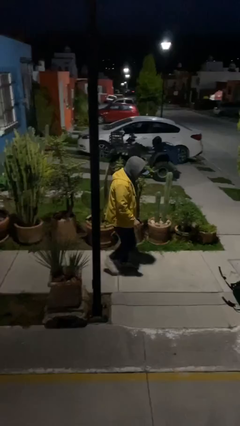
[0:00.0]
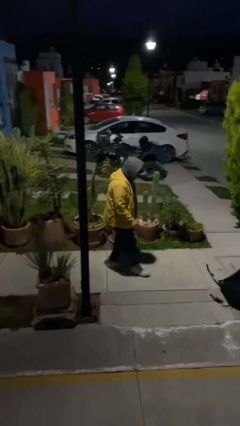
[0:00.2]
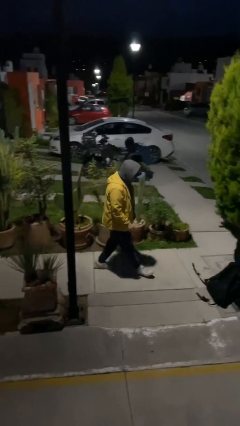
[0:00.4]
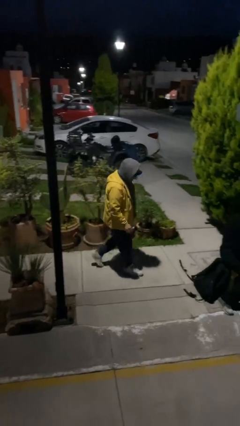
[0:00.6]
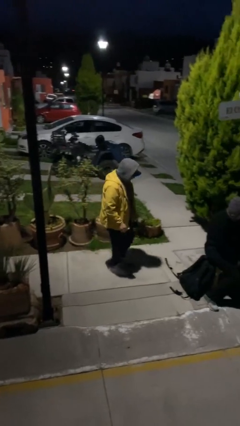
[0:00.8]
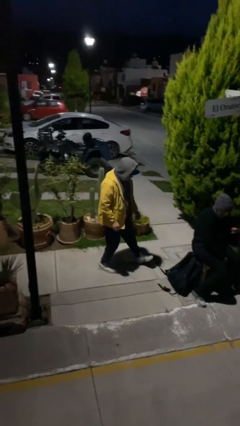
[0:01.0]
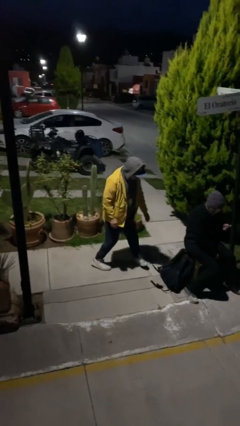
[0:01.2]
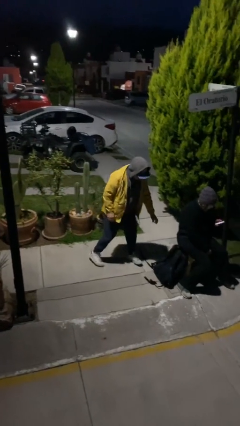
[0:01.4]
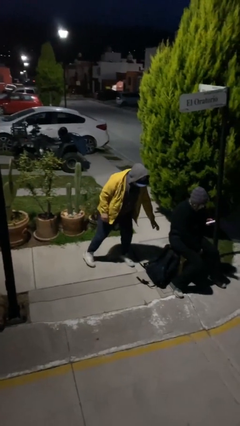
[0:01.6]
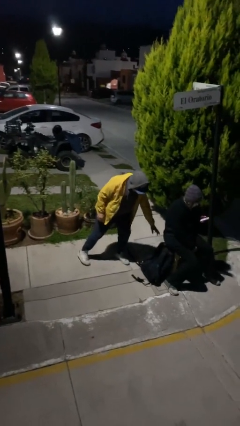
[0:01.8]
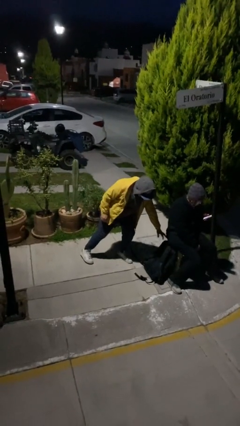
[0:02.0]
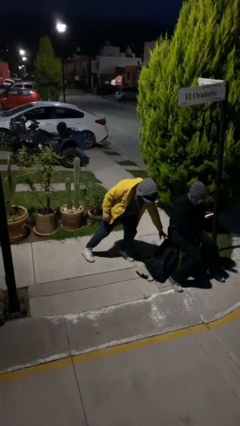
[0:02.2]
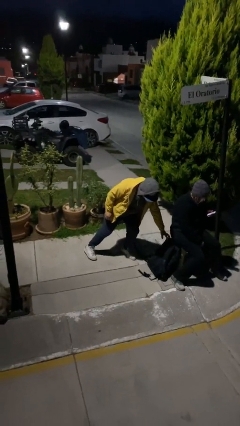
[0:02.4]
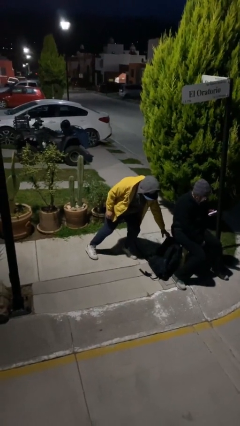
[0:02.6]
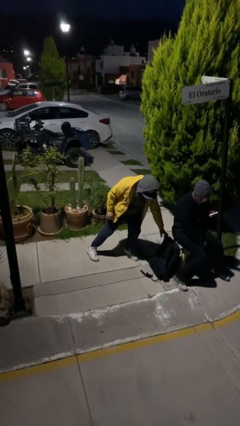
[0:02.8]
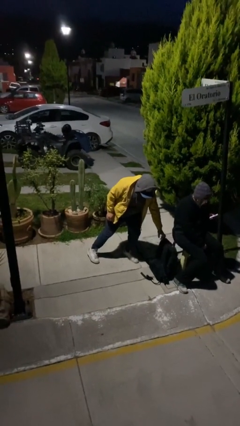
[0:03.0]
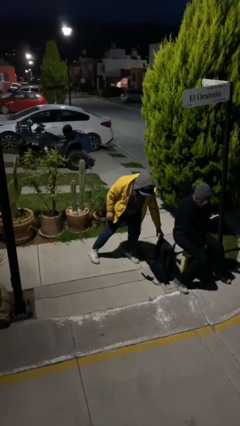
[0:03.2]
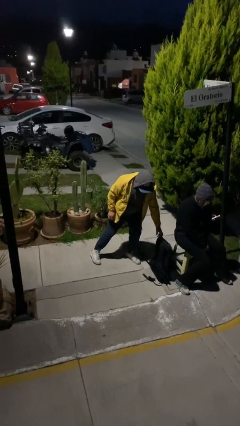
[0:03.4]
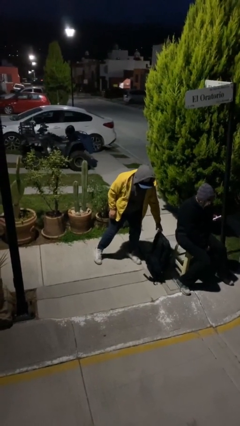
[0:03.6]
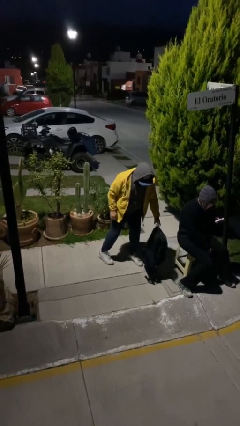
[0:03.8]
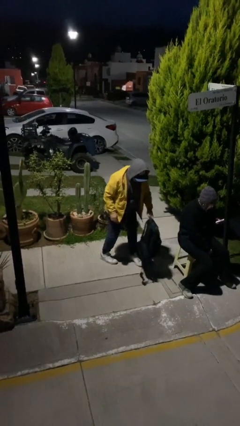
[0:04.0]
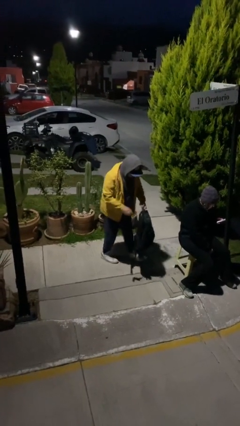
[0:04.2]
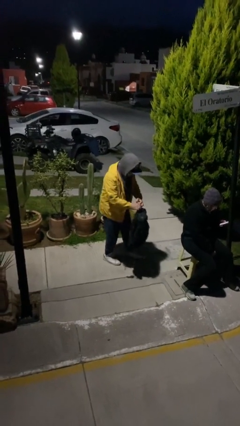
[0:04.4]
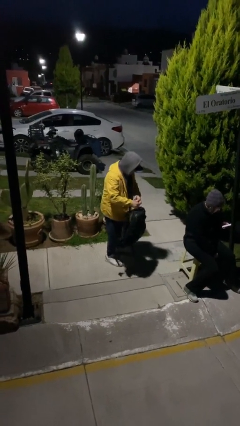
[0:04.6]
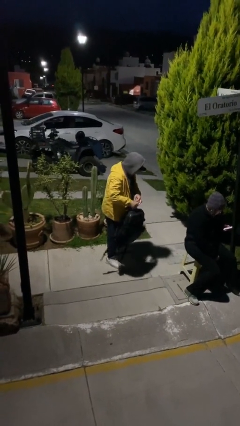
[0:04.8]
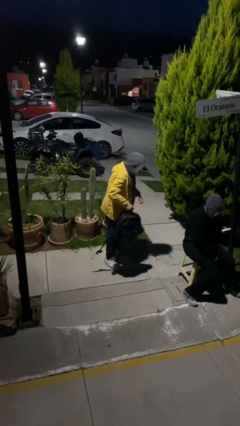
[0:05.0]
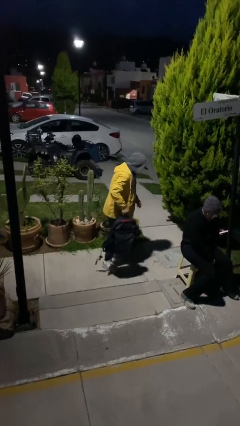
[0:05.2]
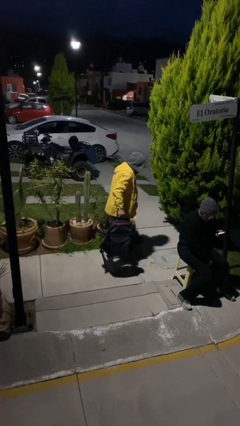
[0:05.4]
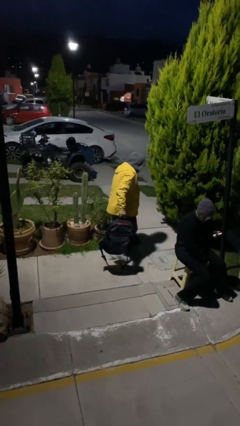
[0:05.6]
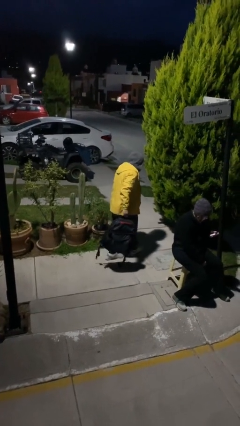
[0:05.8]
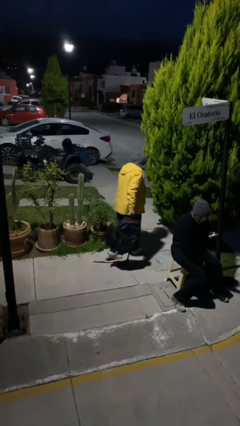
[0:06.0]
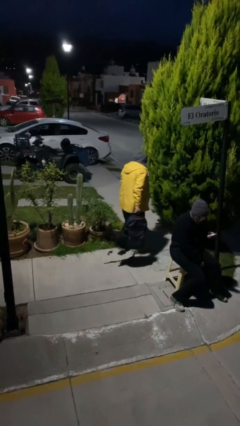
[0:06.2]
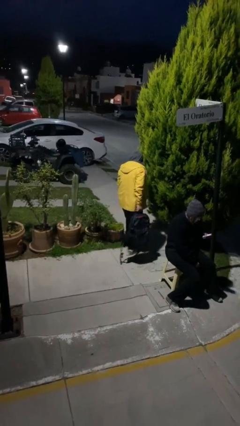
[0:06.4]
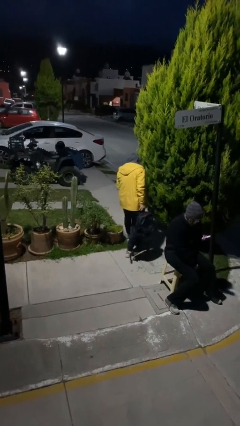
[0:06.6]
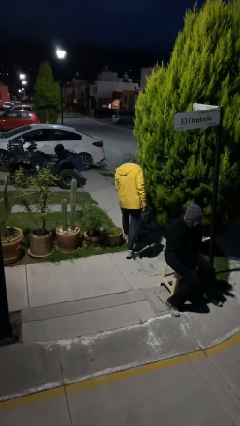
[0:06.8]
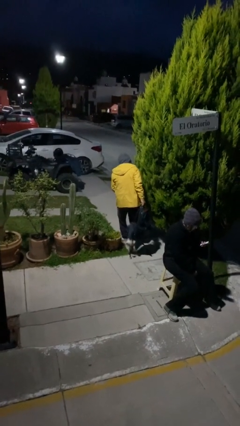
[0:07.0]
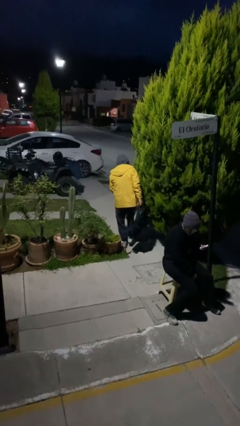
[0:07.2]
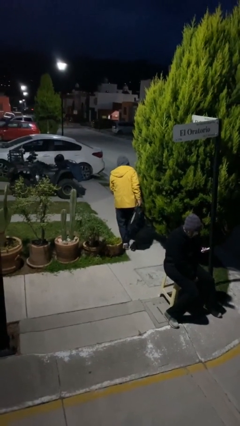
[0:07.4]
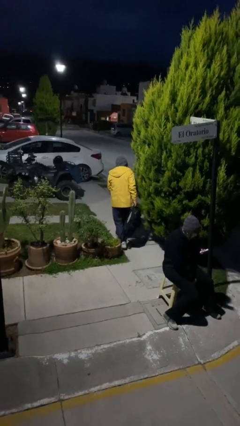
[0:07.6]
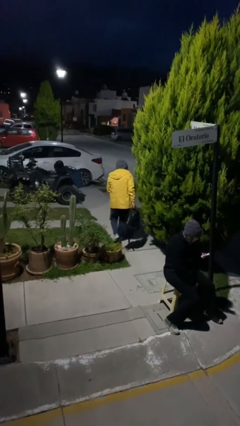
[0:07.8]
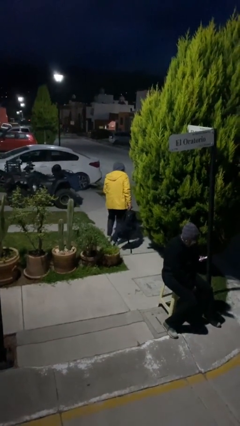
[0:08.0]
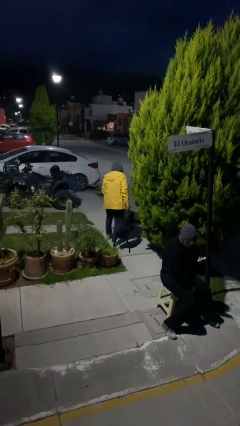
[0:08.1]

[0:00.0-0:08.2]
person steals object from person

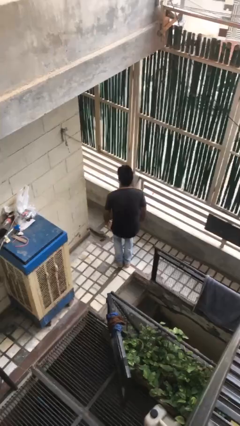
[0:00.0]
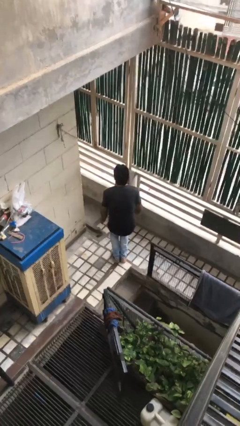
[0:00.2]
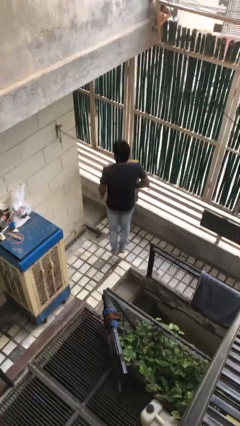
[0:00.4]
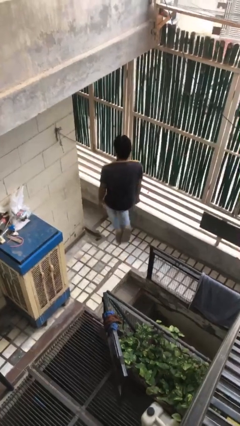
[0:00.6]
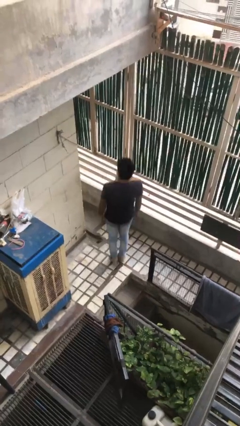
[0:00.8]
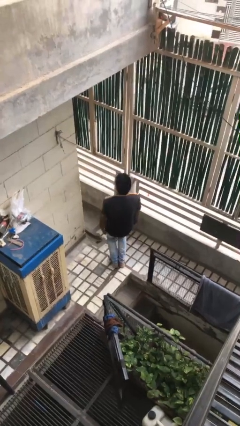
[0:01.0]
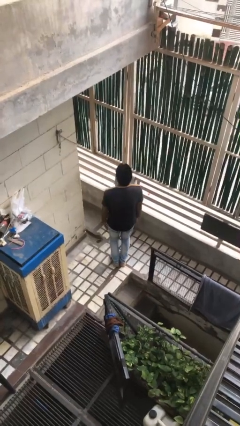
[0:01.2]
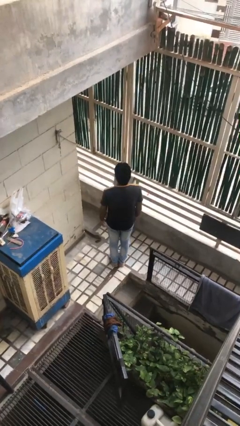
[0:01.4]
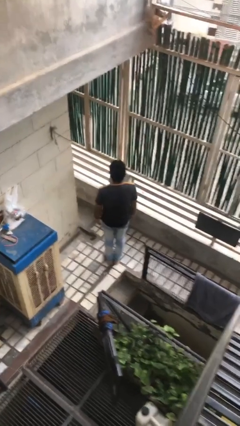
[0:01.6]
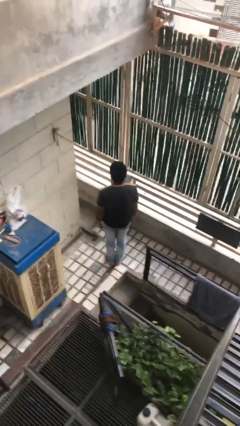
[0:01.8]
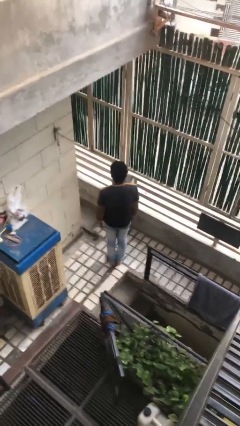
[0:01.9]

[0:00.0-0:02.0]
person jumps

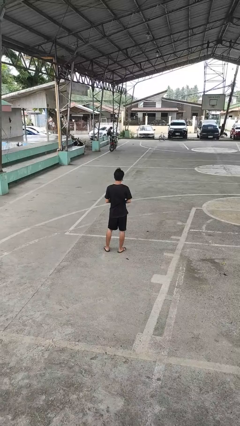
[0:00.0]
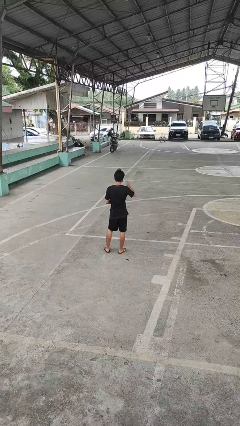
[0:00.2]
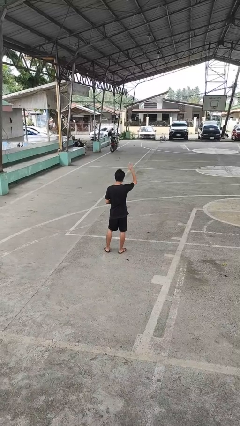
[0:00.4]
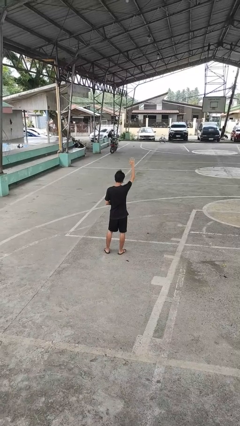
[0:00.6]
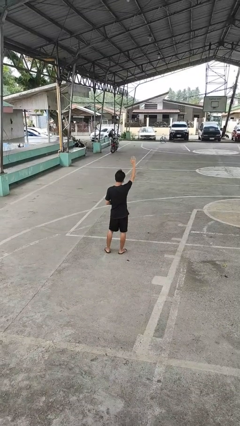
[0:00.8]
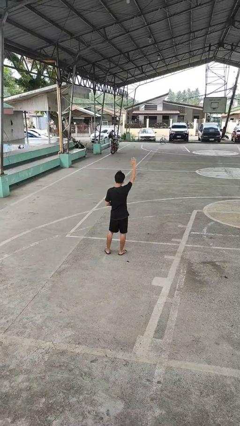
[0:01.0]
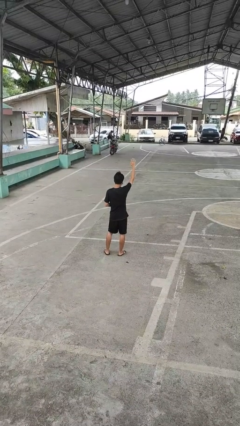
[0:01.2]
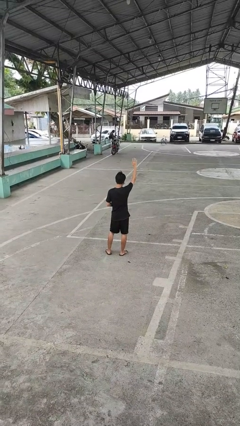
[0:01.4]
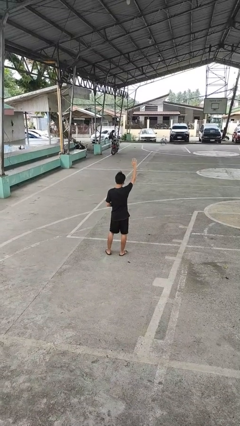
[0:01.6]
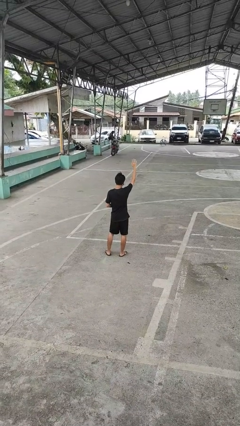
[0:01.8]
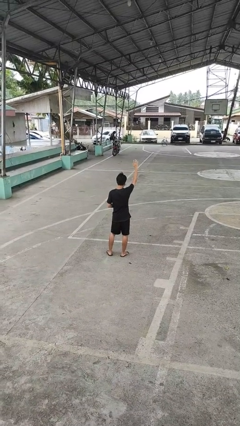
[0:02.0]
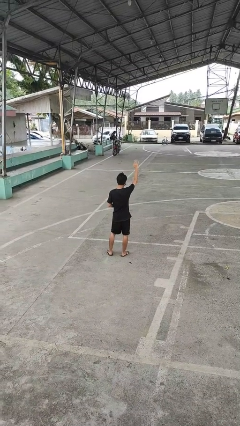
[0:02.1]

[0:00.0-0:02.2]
person gestures raise hand

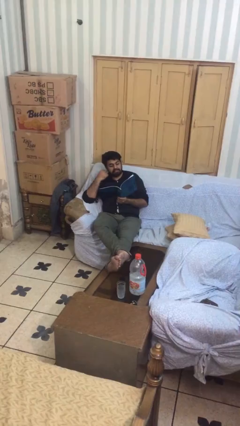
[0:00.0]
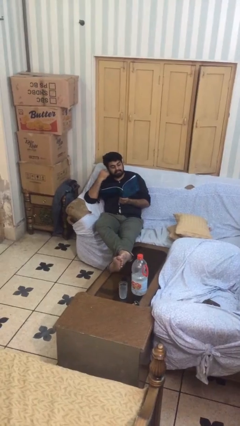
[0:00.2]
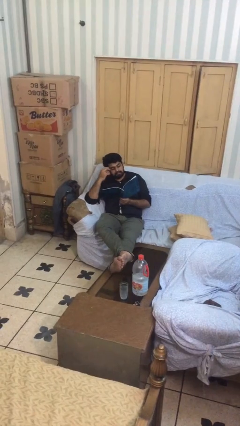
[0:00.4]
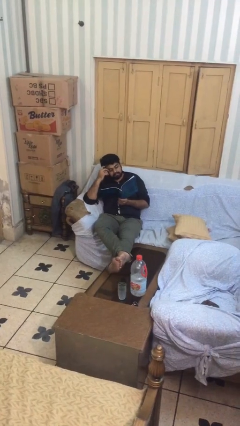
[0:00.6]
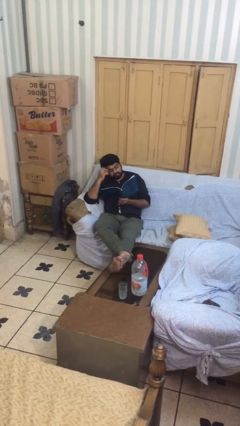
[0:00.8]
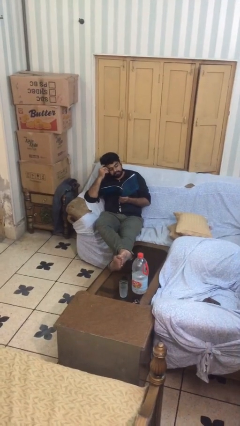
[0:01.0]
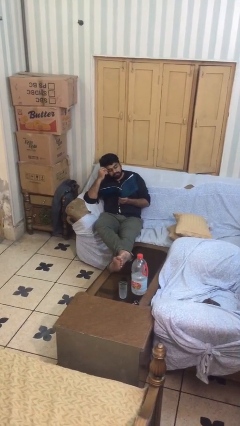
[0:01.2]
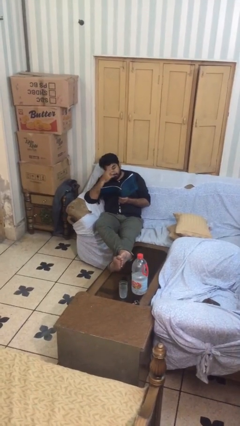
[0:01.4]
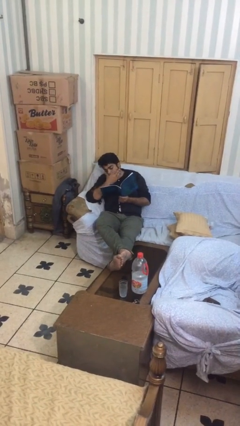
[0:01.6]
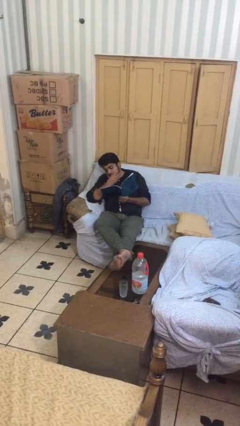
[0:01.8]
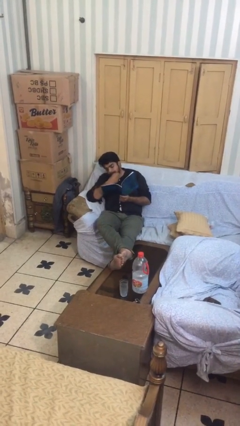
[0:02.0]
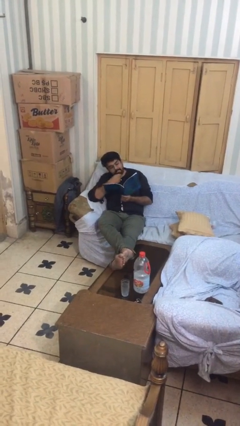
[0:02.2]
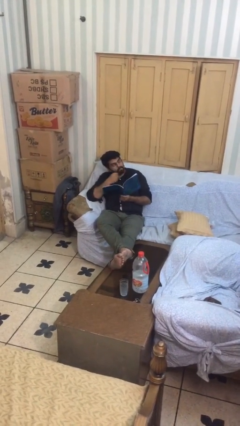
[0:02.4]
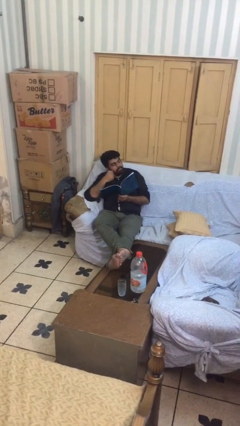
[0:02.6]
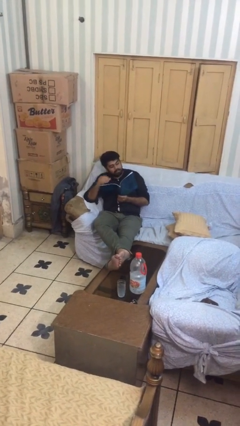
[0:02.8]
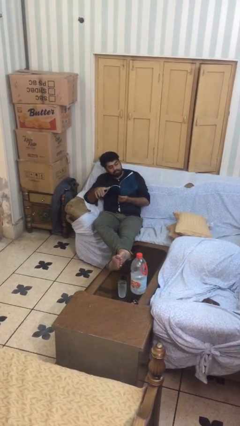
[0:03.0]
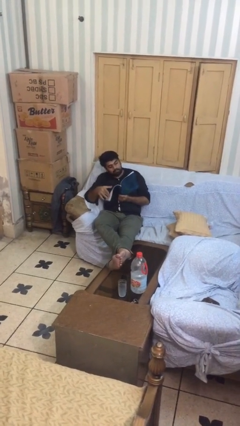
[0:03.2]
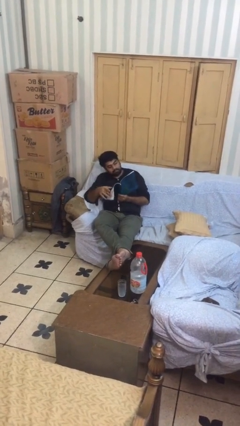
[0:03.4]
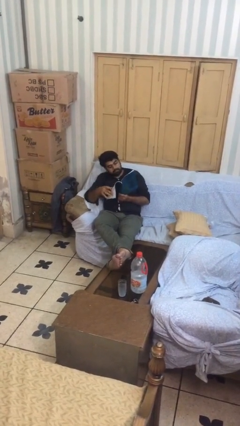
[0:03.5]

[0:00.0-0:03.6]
person reads document

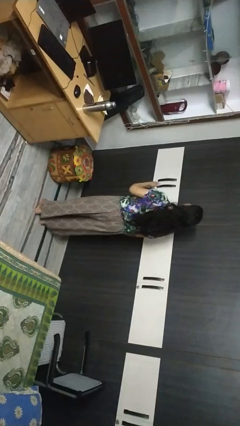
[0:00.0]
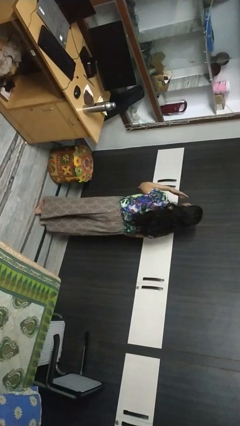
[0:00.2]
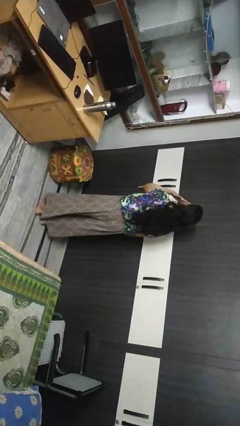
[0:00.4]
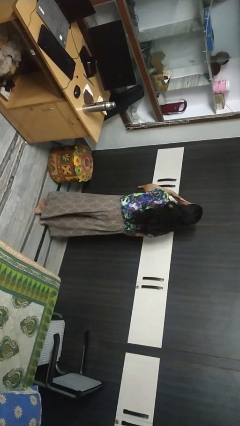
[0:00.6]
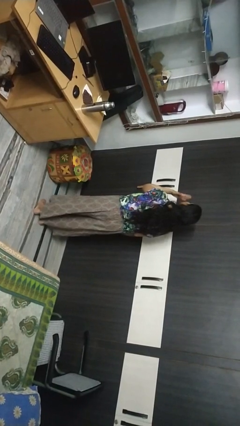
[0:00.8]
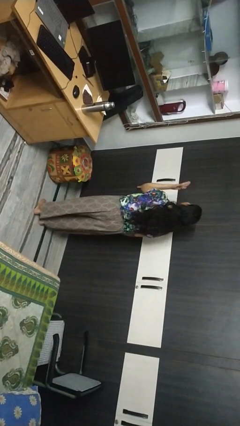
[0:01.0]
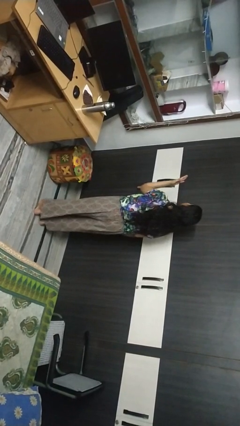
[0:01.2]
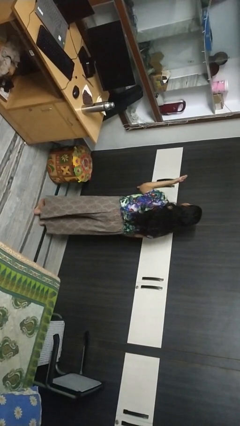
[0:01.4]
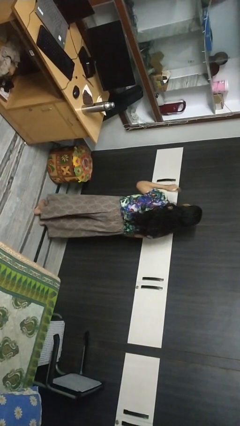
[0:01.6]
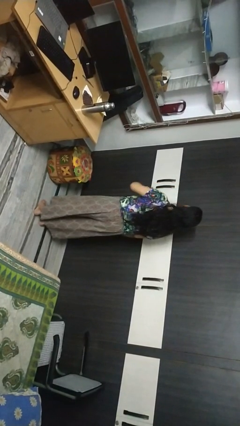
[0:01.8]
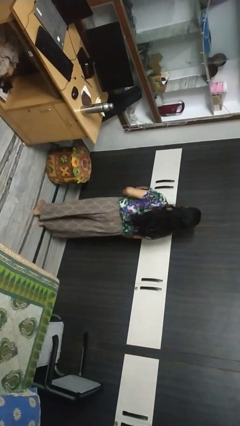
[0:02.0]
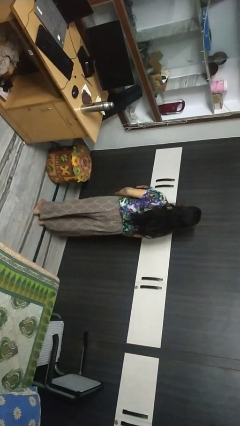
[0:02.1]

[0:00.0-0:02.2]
person gestures blow kiss
